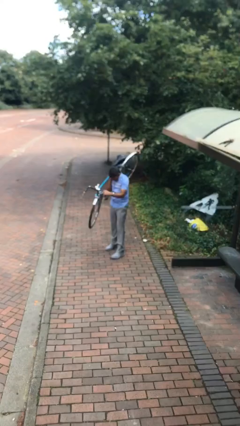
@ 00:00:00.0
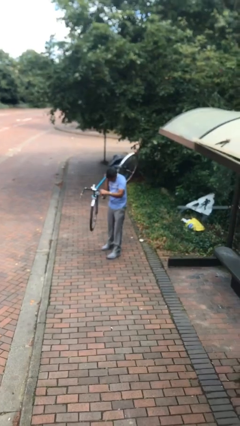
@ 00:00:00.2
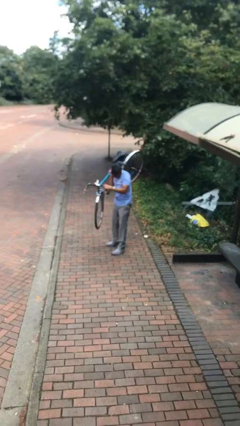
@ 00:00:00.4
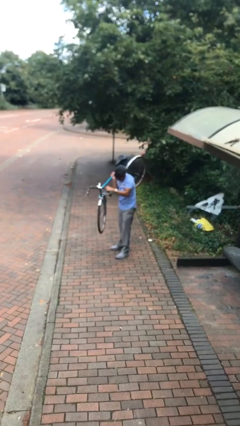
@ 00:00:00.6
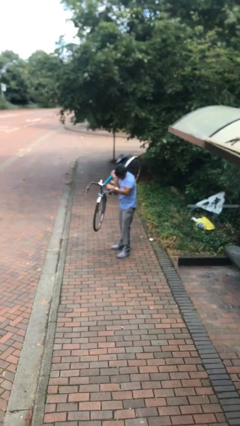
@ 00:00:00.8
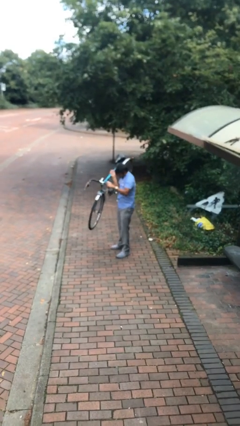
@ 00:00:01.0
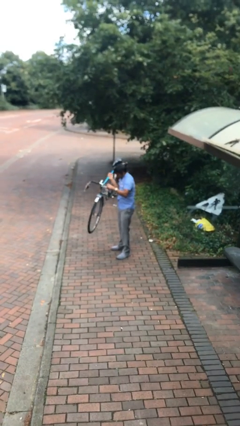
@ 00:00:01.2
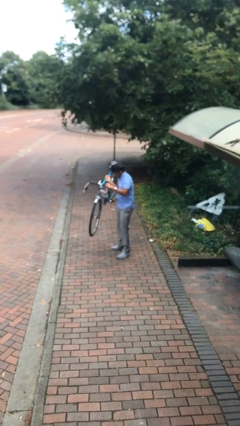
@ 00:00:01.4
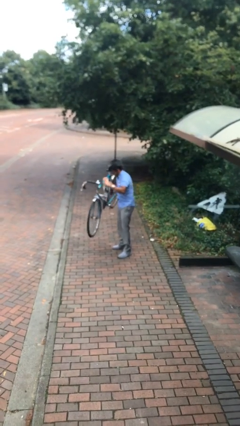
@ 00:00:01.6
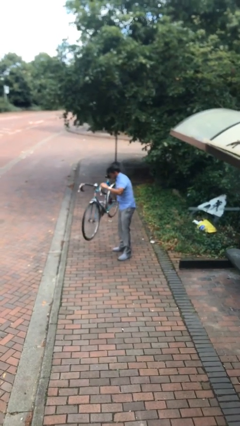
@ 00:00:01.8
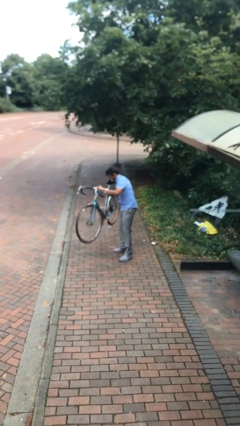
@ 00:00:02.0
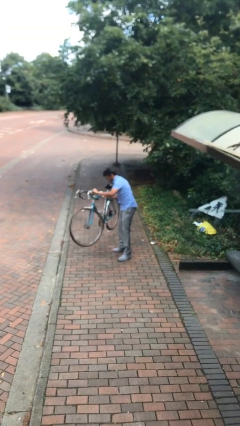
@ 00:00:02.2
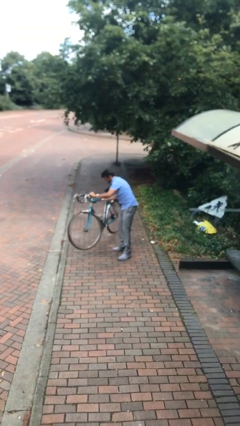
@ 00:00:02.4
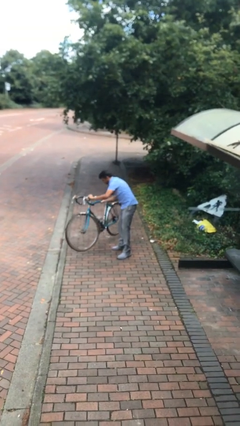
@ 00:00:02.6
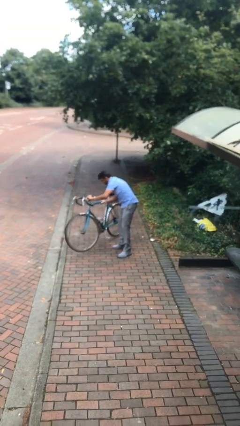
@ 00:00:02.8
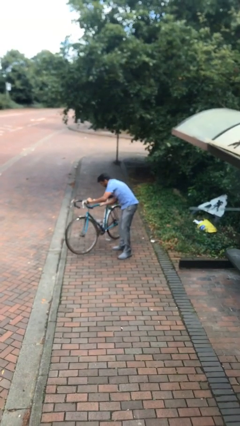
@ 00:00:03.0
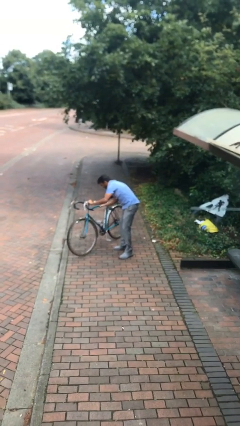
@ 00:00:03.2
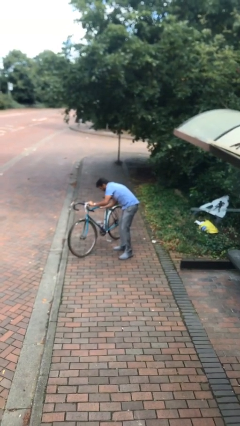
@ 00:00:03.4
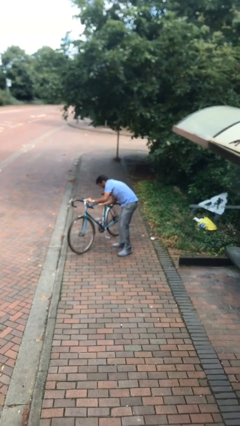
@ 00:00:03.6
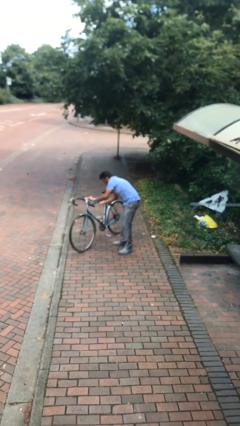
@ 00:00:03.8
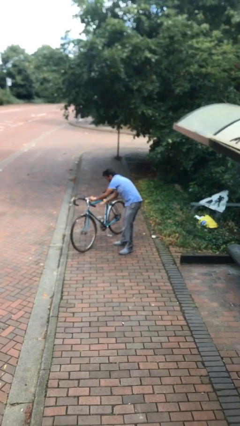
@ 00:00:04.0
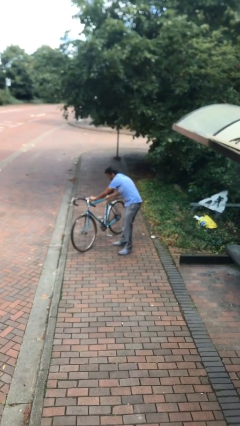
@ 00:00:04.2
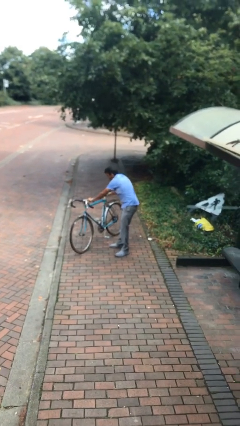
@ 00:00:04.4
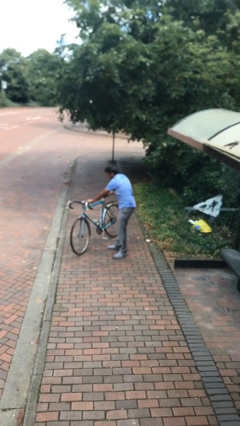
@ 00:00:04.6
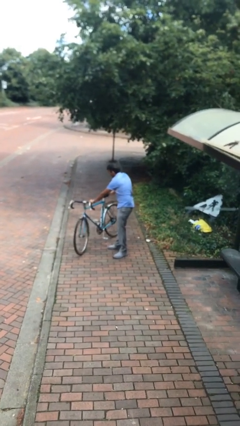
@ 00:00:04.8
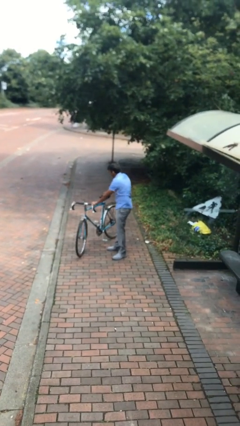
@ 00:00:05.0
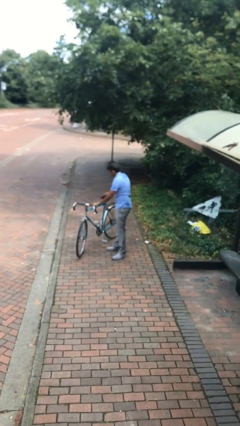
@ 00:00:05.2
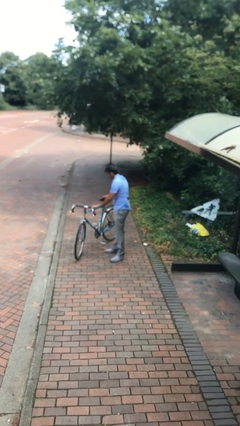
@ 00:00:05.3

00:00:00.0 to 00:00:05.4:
person puts down object on floor

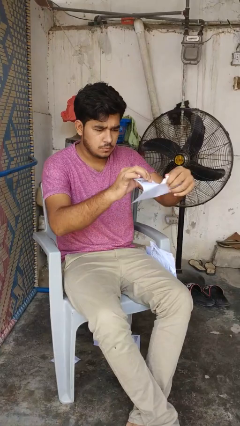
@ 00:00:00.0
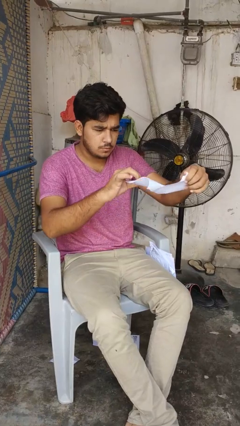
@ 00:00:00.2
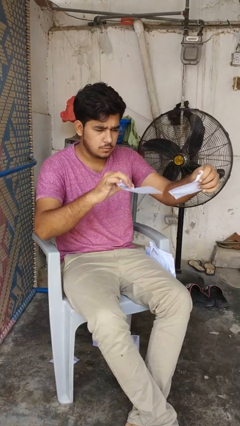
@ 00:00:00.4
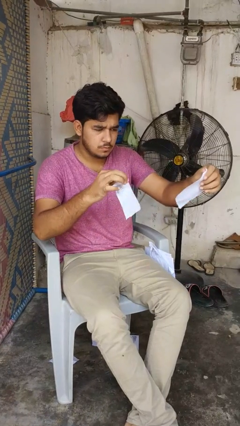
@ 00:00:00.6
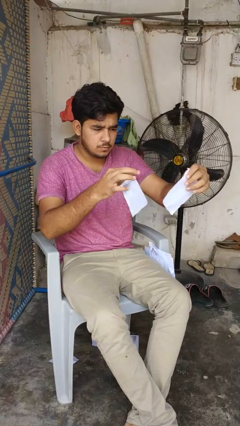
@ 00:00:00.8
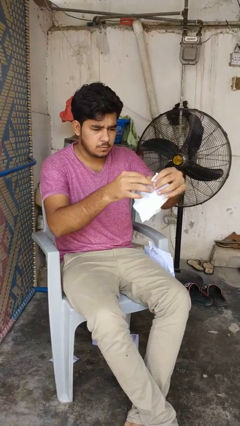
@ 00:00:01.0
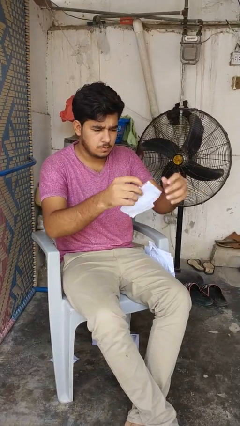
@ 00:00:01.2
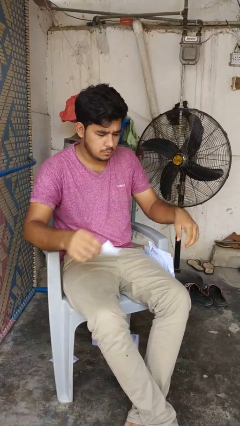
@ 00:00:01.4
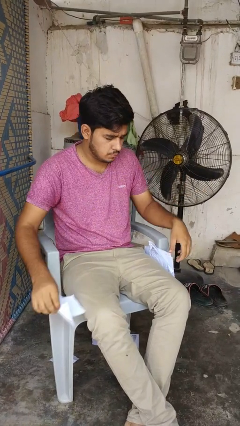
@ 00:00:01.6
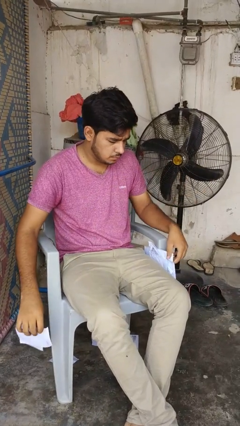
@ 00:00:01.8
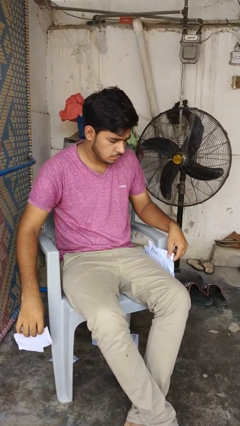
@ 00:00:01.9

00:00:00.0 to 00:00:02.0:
person tears paper

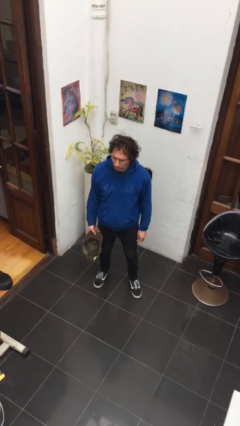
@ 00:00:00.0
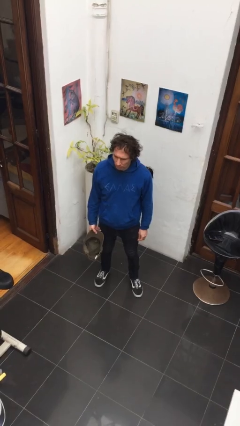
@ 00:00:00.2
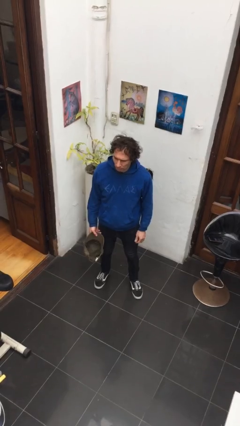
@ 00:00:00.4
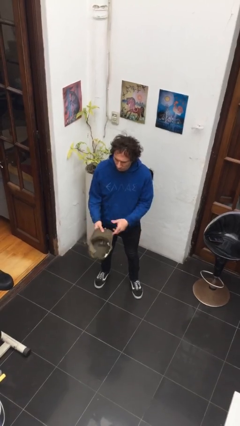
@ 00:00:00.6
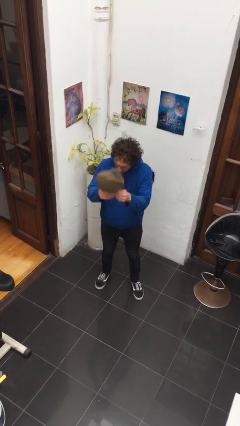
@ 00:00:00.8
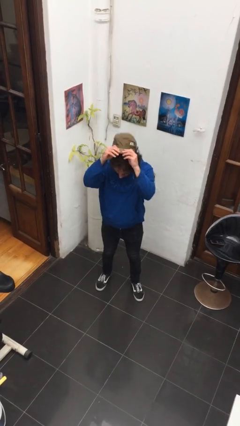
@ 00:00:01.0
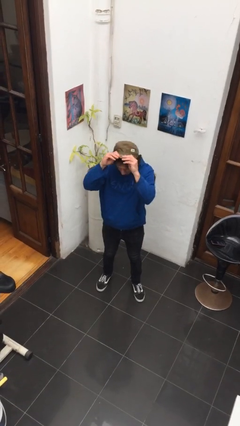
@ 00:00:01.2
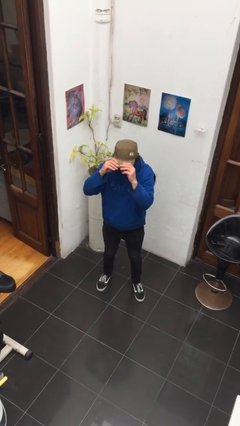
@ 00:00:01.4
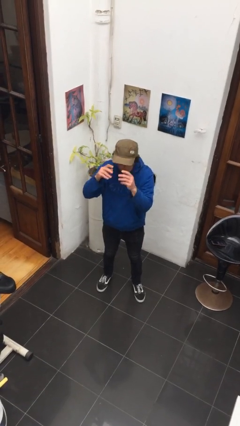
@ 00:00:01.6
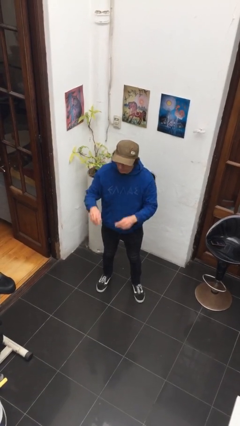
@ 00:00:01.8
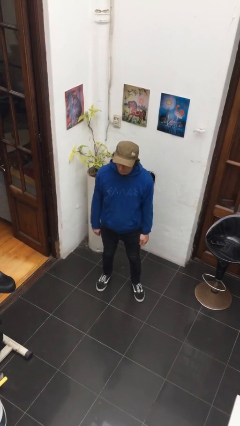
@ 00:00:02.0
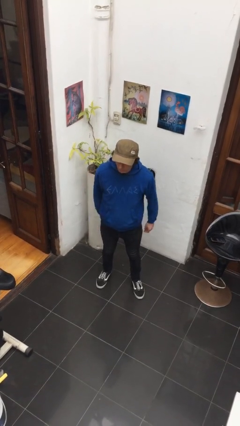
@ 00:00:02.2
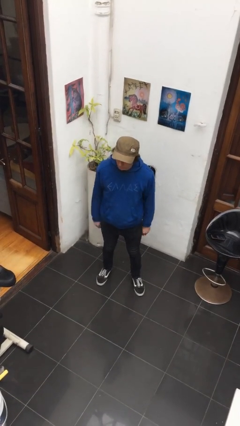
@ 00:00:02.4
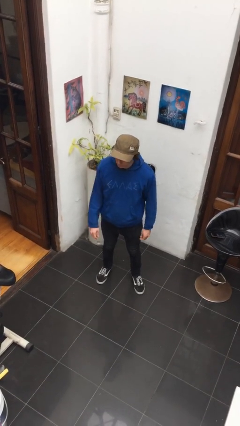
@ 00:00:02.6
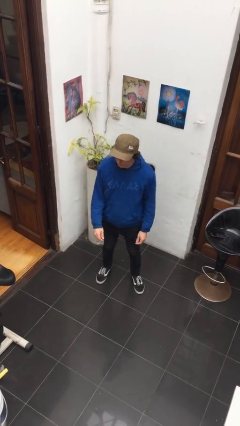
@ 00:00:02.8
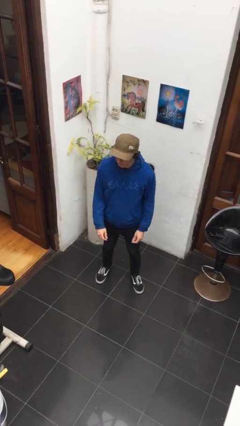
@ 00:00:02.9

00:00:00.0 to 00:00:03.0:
person puts on hat

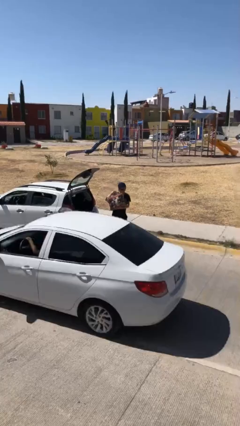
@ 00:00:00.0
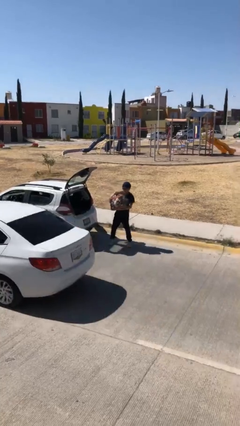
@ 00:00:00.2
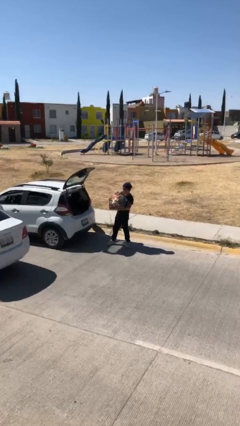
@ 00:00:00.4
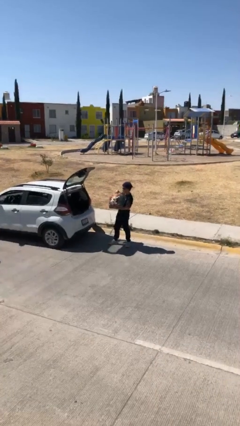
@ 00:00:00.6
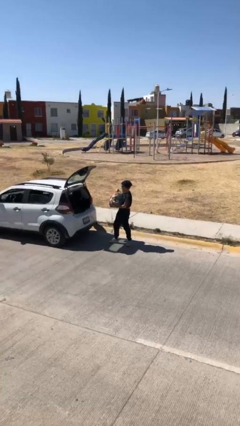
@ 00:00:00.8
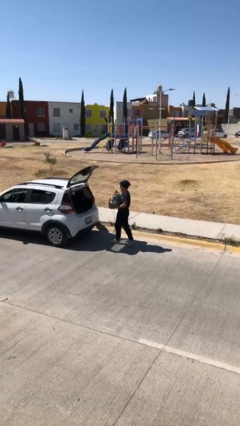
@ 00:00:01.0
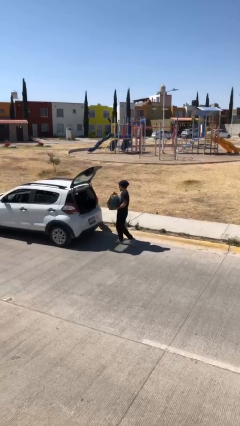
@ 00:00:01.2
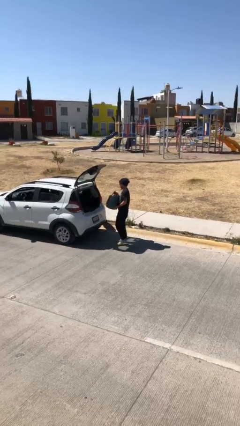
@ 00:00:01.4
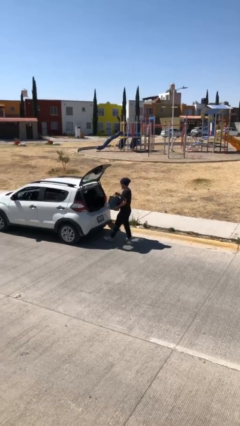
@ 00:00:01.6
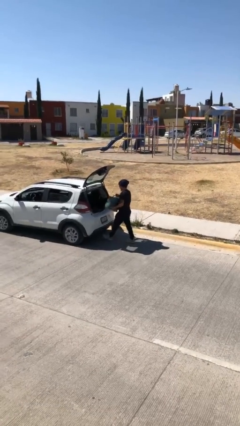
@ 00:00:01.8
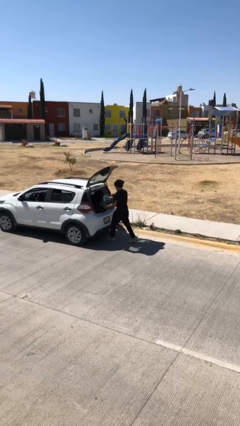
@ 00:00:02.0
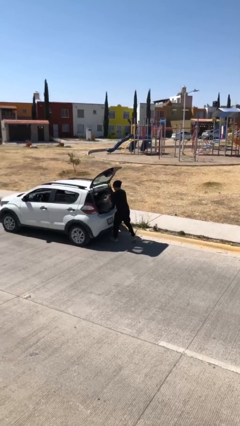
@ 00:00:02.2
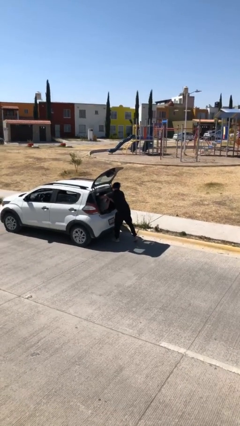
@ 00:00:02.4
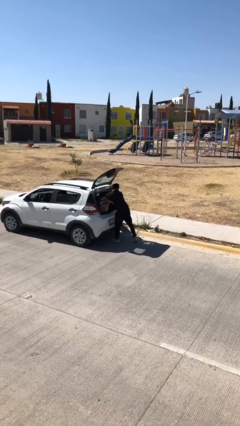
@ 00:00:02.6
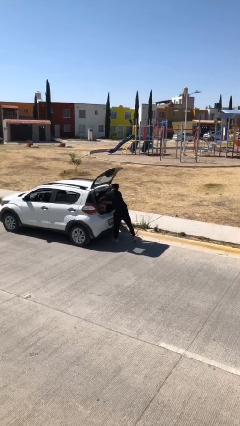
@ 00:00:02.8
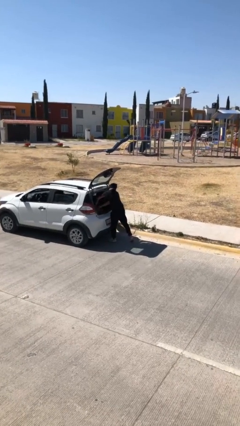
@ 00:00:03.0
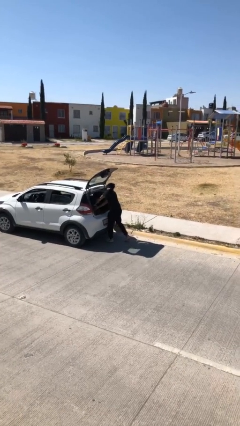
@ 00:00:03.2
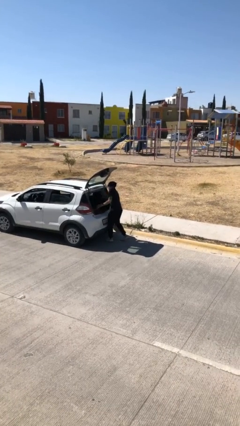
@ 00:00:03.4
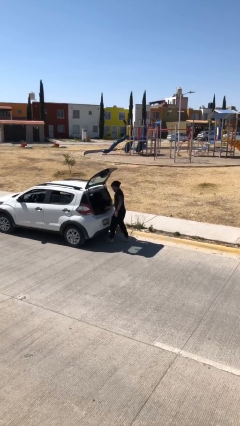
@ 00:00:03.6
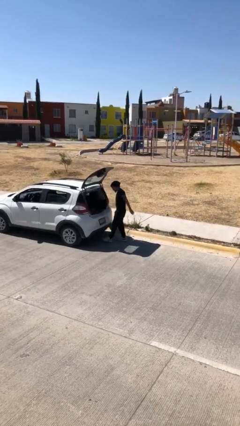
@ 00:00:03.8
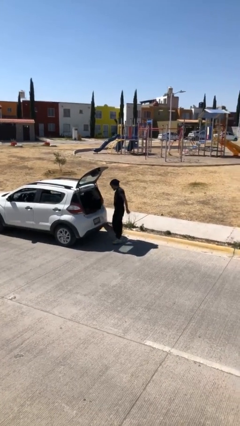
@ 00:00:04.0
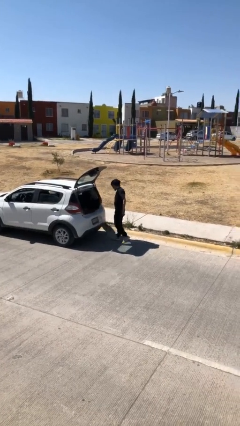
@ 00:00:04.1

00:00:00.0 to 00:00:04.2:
person loads car

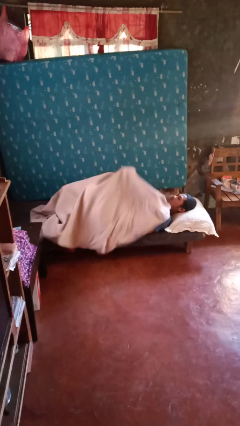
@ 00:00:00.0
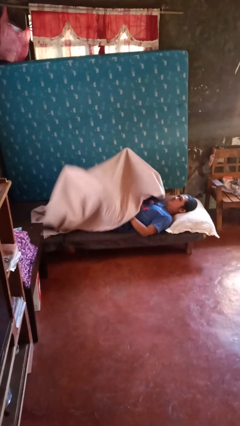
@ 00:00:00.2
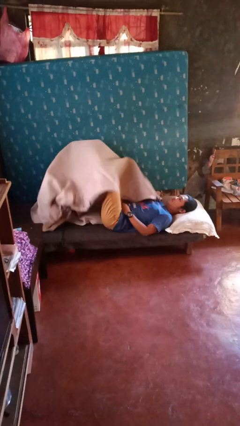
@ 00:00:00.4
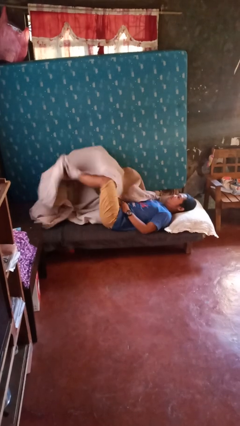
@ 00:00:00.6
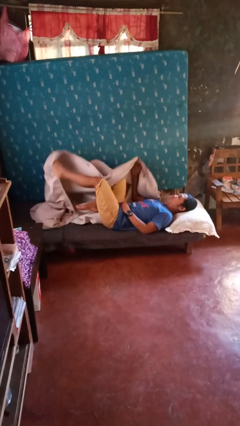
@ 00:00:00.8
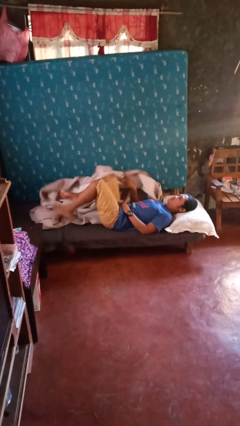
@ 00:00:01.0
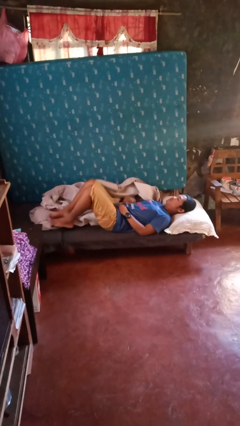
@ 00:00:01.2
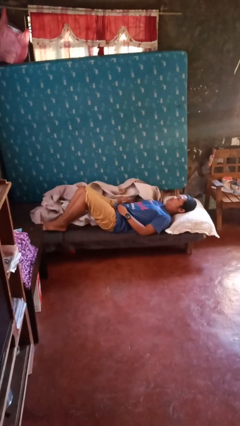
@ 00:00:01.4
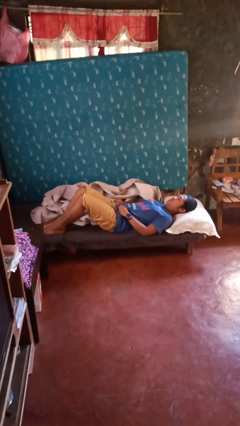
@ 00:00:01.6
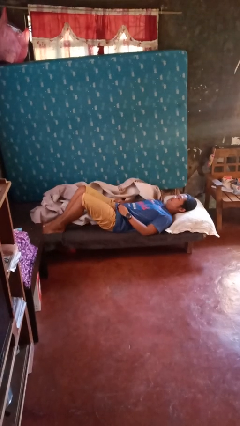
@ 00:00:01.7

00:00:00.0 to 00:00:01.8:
person uncovers with bedsheets

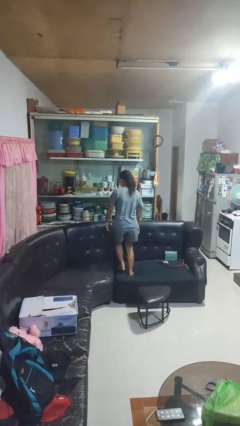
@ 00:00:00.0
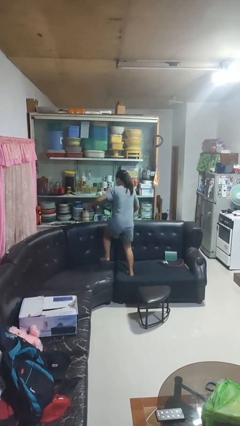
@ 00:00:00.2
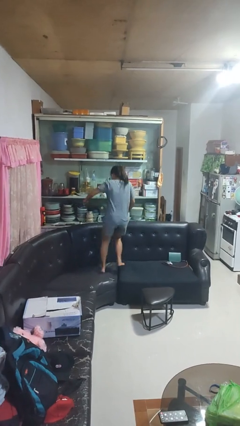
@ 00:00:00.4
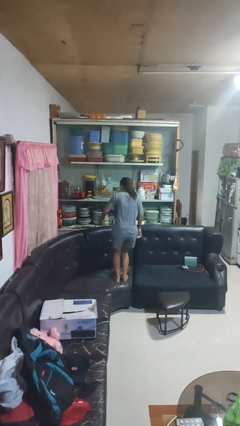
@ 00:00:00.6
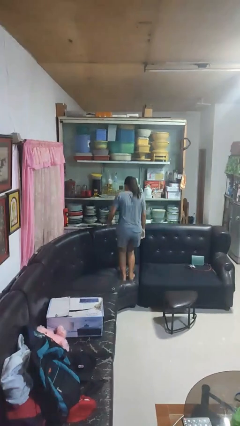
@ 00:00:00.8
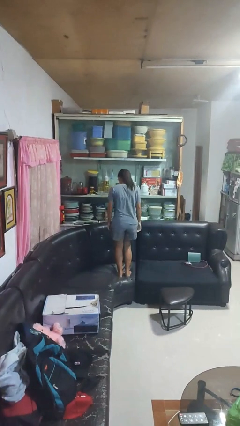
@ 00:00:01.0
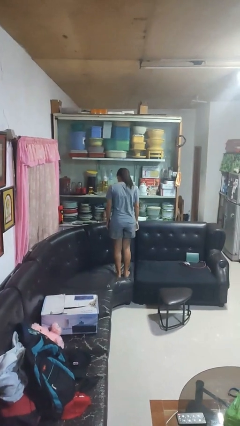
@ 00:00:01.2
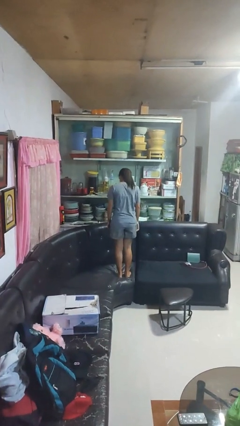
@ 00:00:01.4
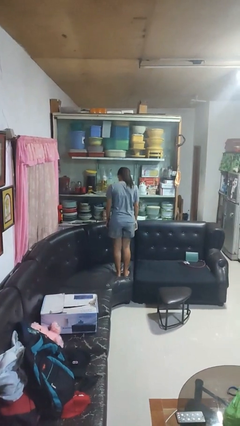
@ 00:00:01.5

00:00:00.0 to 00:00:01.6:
person jumps on couch
